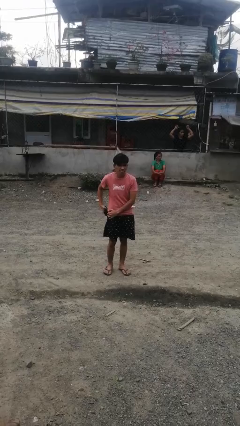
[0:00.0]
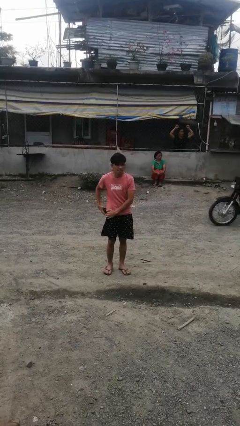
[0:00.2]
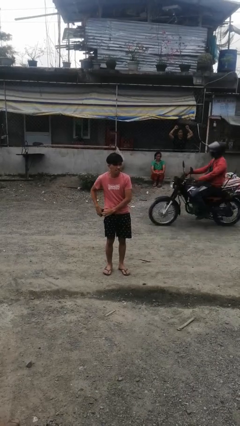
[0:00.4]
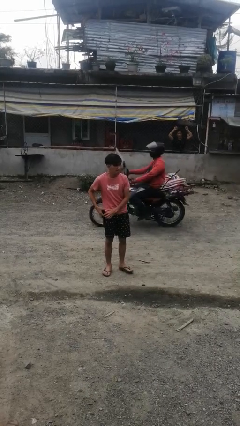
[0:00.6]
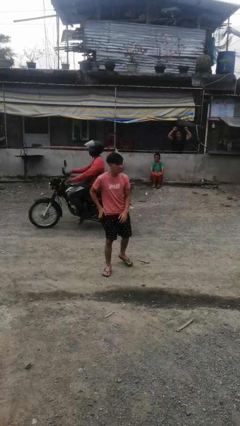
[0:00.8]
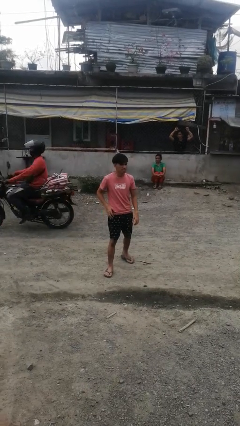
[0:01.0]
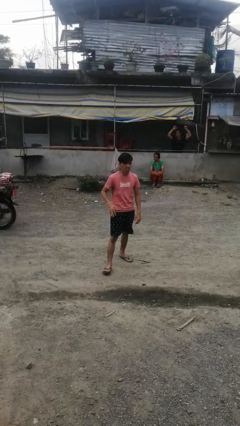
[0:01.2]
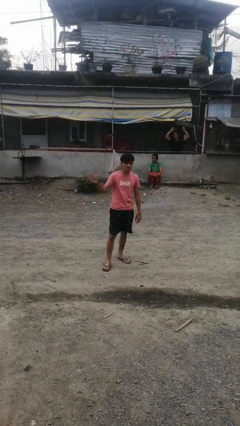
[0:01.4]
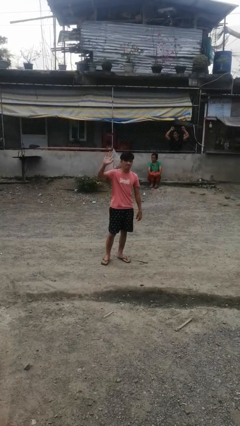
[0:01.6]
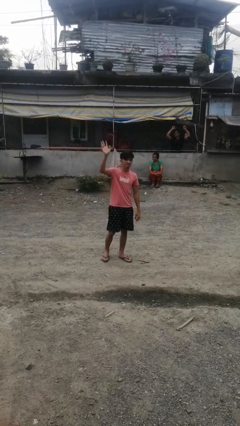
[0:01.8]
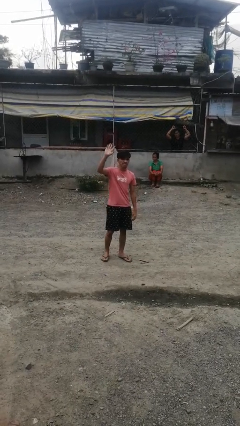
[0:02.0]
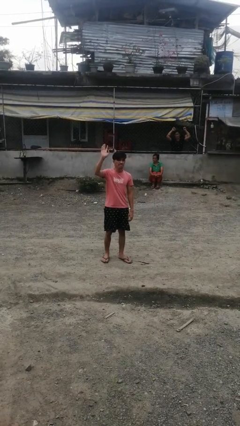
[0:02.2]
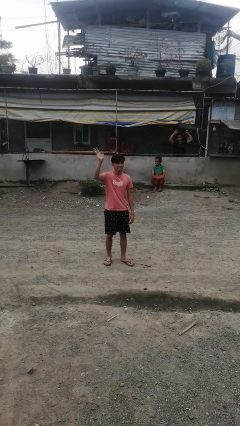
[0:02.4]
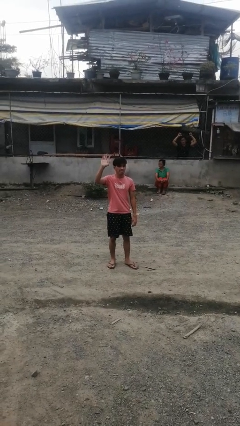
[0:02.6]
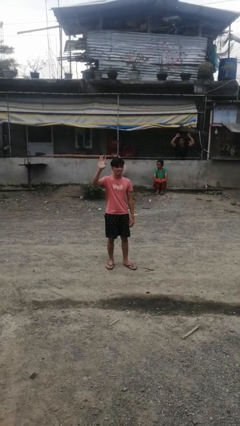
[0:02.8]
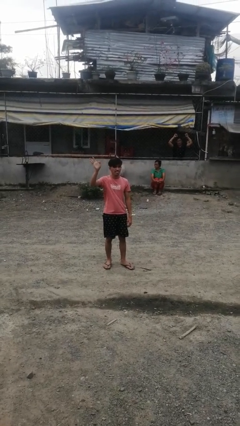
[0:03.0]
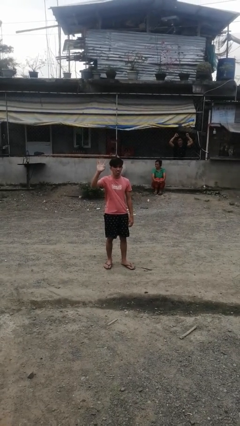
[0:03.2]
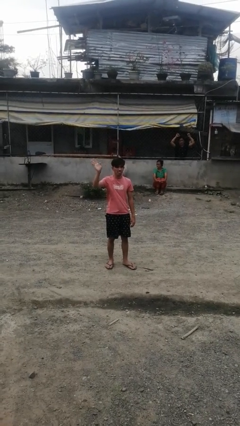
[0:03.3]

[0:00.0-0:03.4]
person waves at person

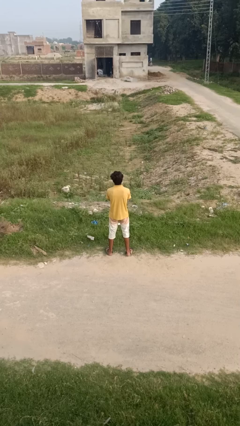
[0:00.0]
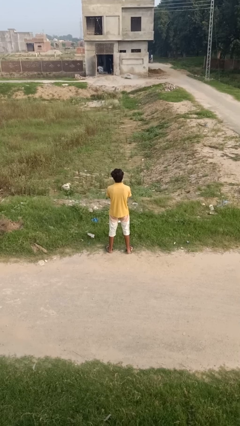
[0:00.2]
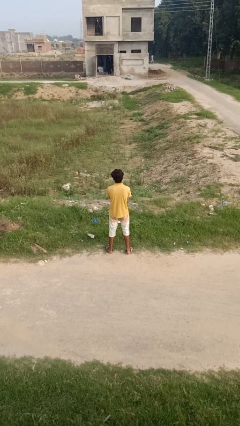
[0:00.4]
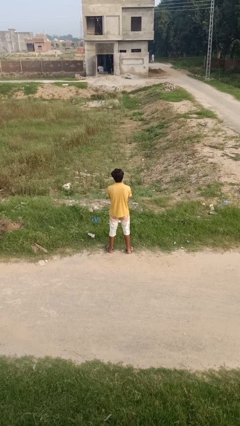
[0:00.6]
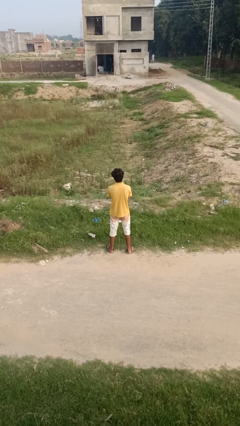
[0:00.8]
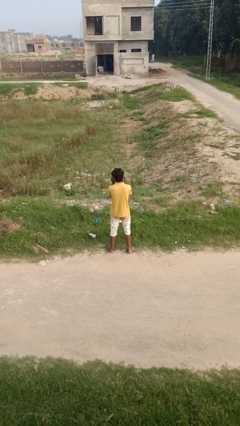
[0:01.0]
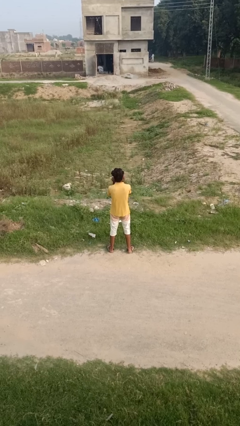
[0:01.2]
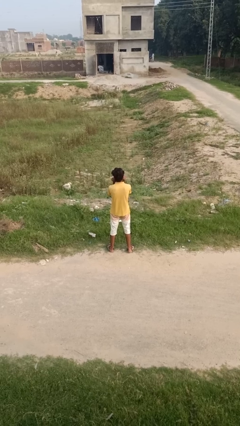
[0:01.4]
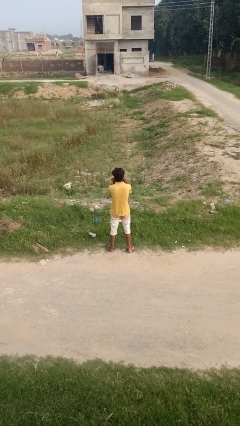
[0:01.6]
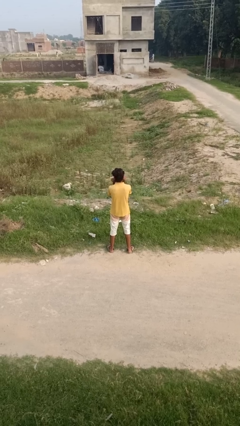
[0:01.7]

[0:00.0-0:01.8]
person touches earlobe

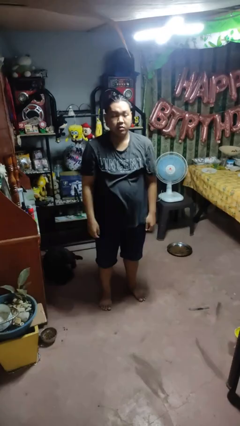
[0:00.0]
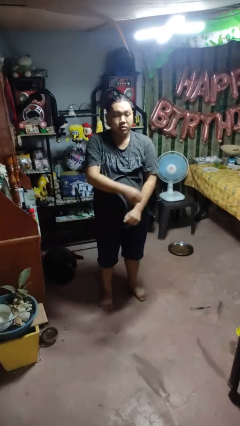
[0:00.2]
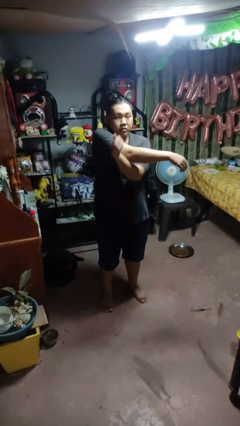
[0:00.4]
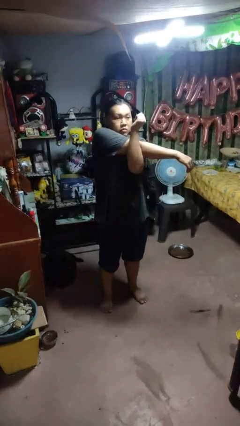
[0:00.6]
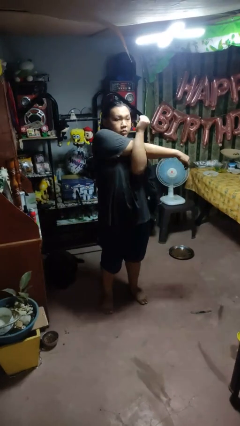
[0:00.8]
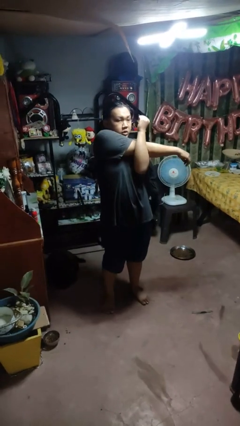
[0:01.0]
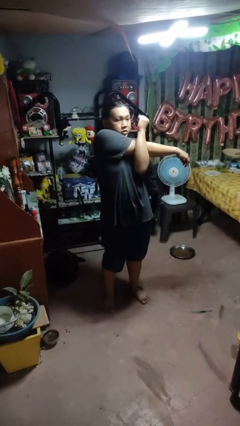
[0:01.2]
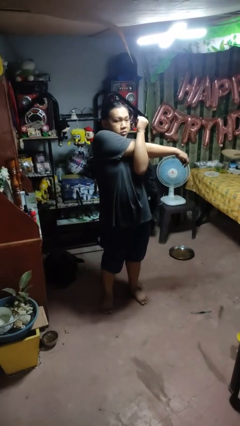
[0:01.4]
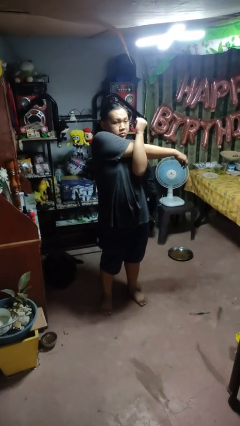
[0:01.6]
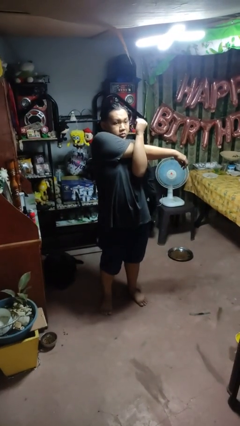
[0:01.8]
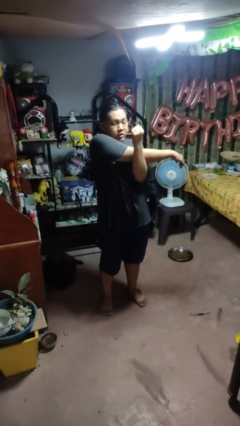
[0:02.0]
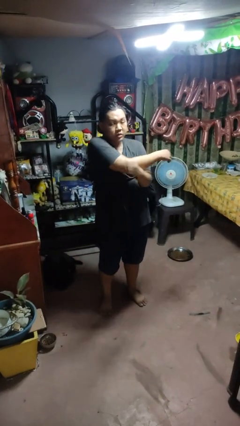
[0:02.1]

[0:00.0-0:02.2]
person crosses arms

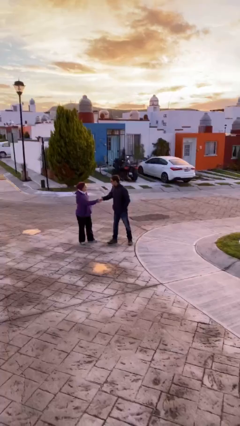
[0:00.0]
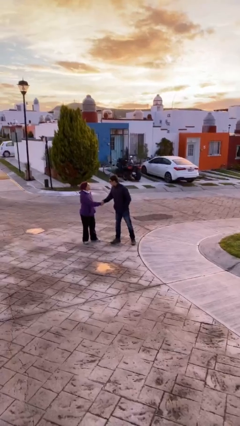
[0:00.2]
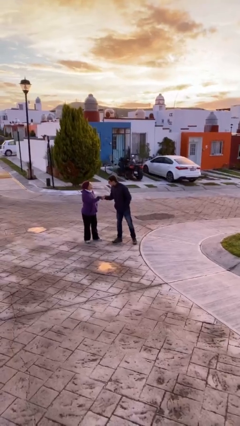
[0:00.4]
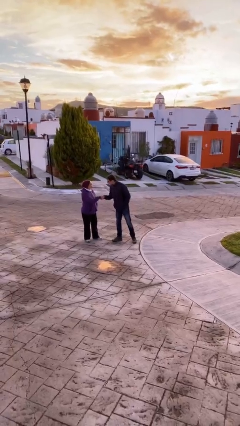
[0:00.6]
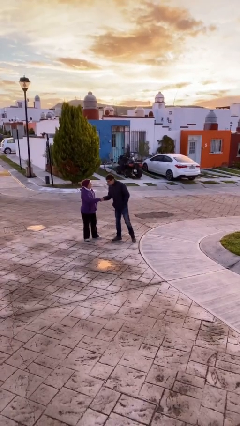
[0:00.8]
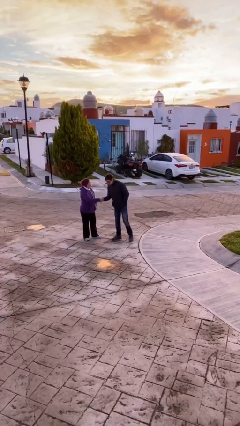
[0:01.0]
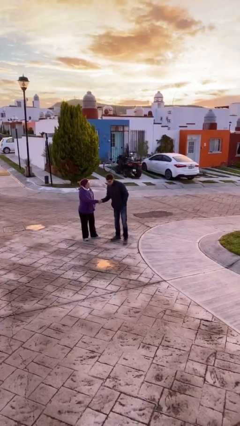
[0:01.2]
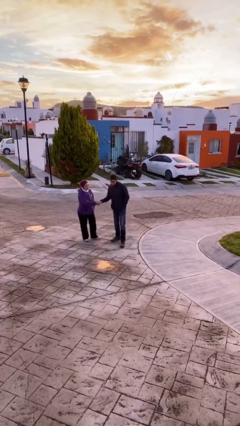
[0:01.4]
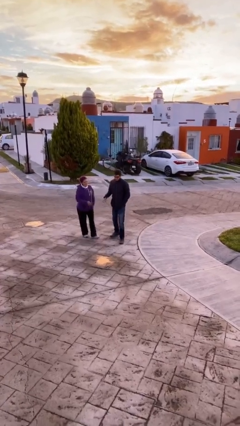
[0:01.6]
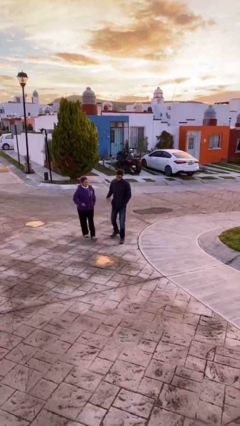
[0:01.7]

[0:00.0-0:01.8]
person shakes hand

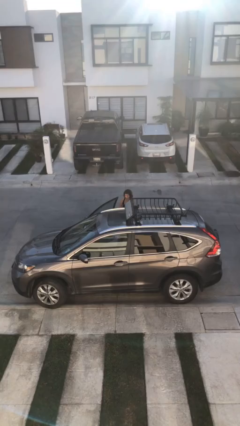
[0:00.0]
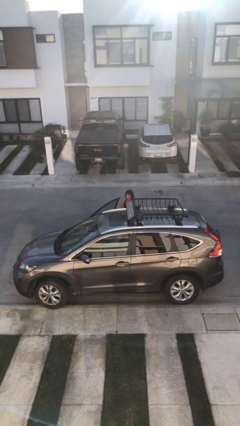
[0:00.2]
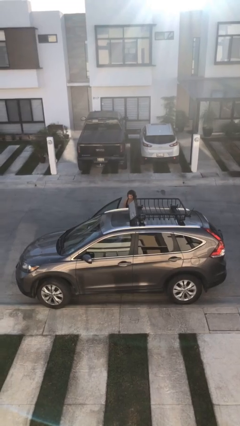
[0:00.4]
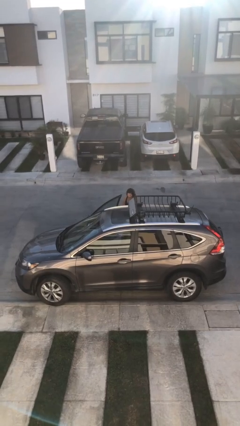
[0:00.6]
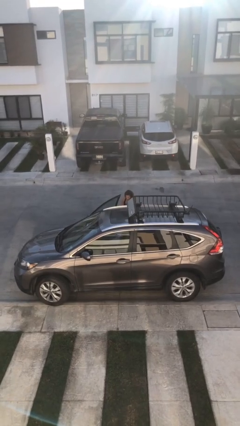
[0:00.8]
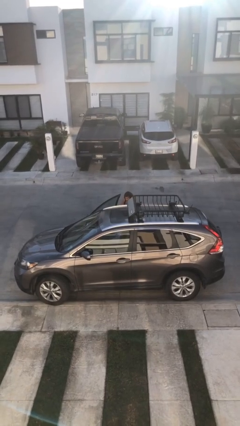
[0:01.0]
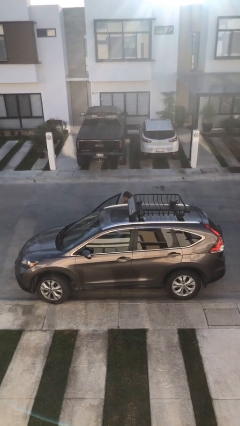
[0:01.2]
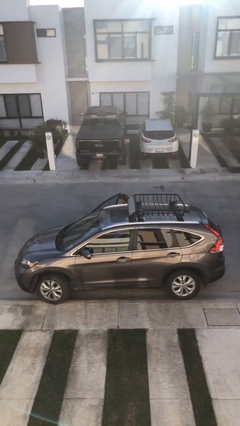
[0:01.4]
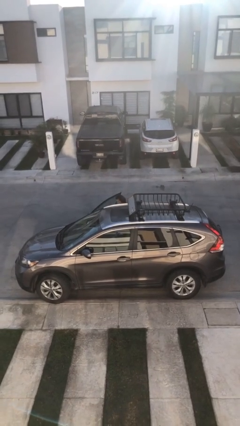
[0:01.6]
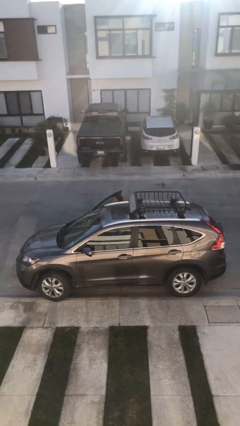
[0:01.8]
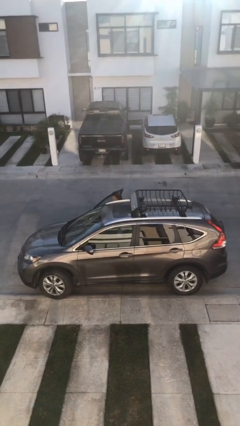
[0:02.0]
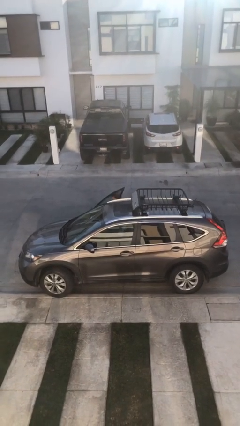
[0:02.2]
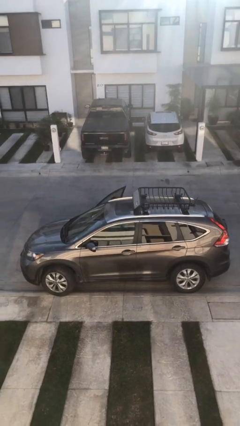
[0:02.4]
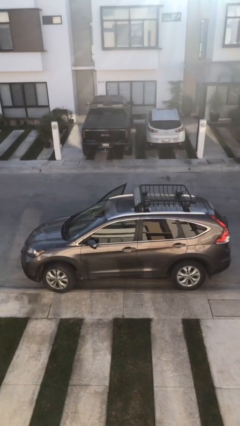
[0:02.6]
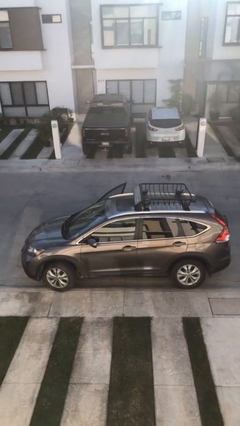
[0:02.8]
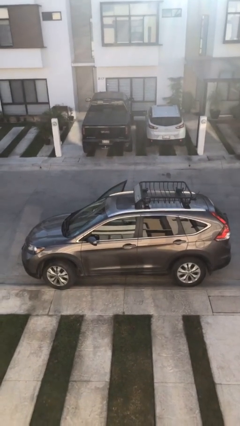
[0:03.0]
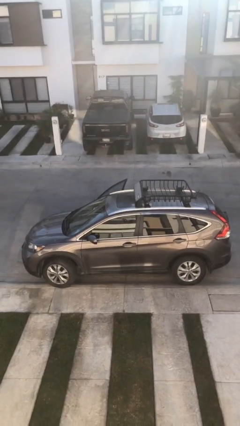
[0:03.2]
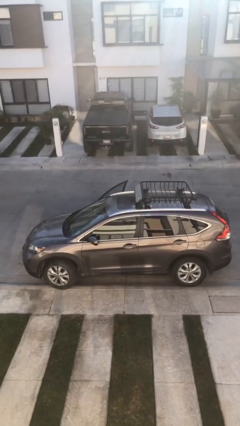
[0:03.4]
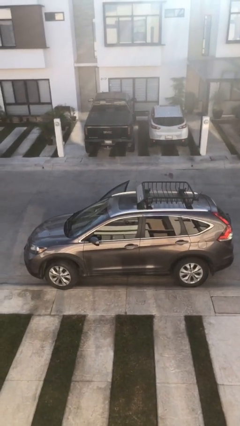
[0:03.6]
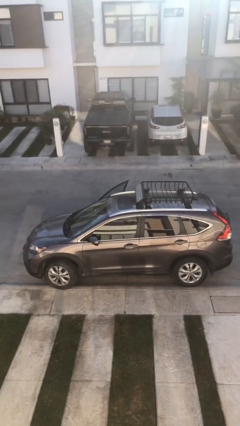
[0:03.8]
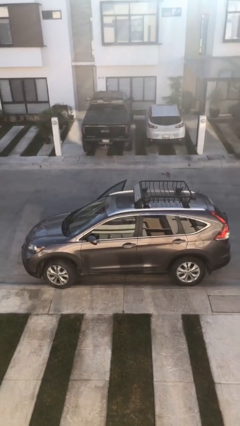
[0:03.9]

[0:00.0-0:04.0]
person enters car

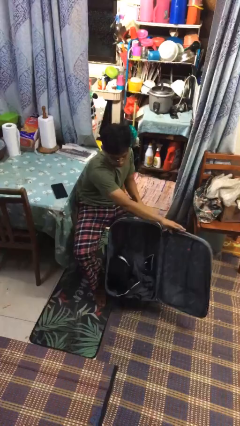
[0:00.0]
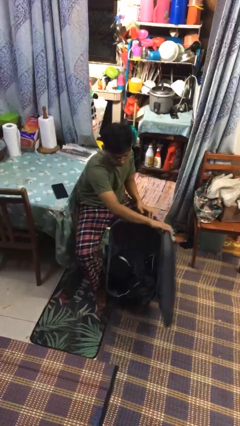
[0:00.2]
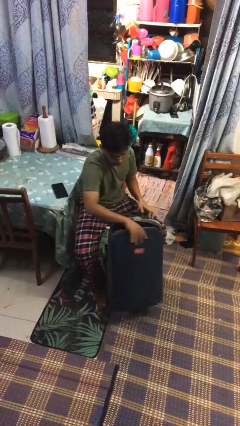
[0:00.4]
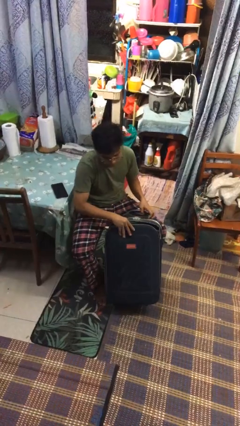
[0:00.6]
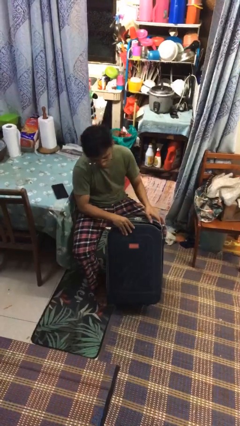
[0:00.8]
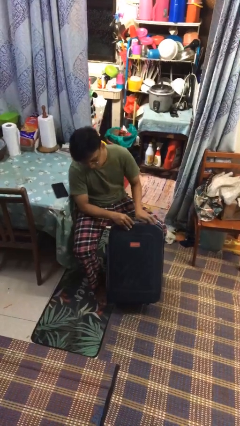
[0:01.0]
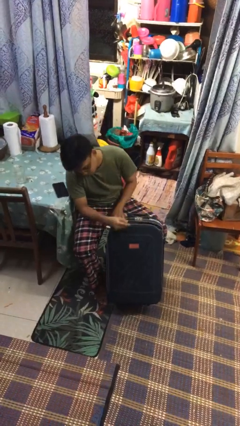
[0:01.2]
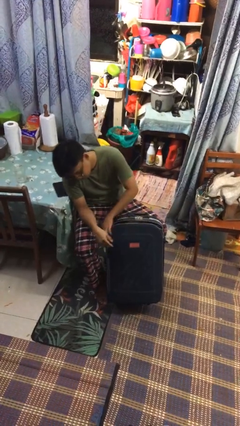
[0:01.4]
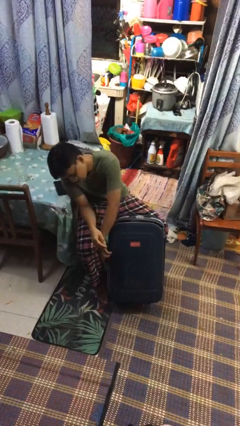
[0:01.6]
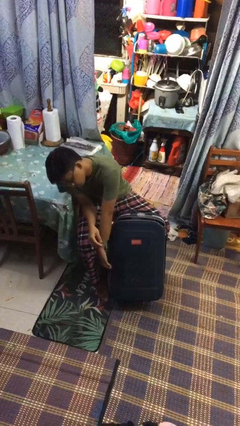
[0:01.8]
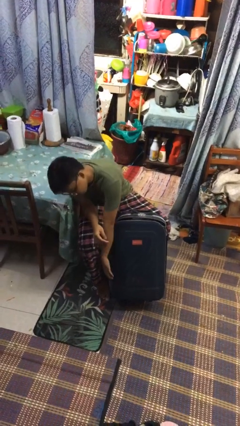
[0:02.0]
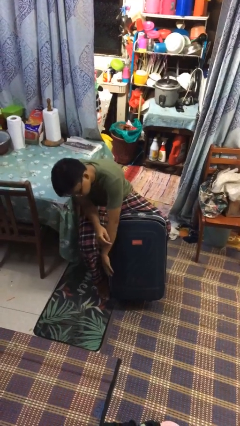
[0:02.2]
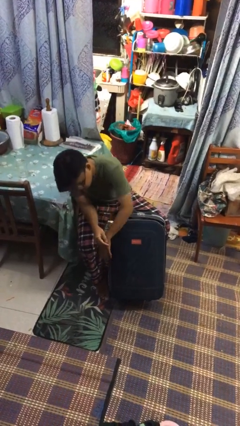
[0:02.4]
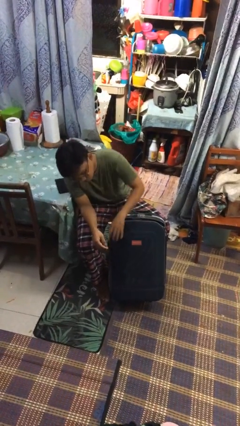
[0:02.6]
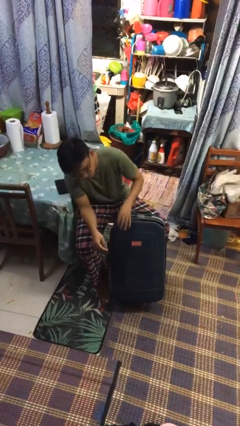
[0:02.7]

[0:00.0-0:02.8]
person closes suitcase

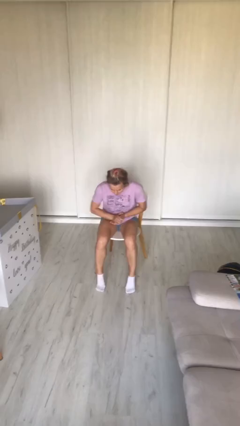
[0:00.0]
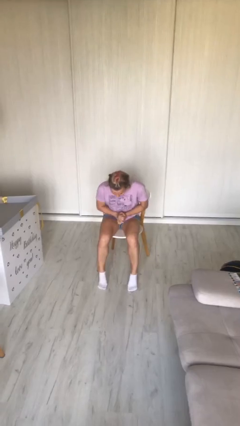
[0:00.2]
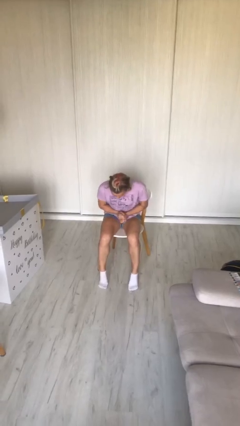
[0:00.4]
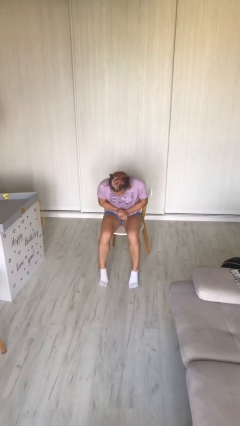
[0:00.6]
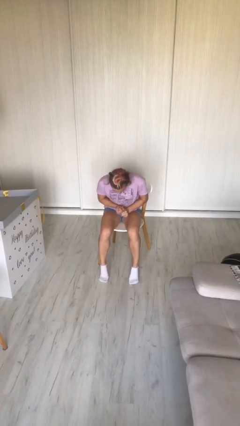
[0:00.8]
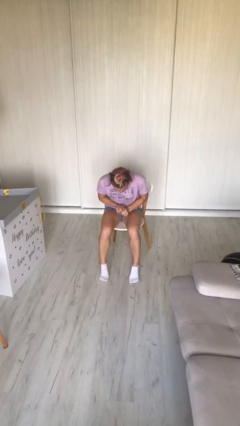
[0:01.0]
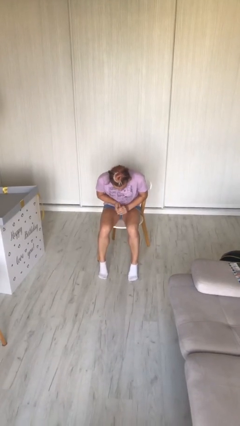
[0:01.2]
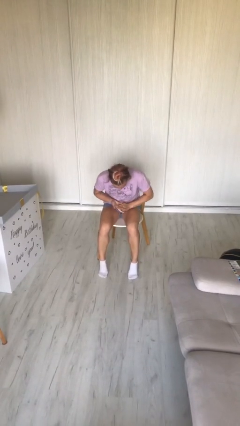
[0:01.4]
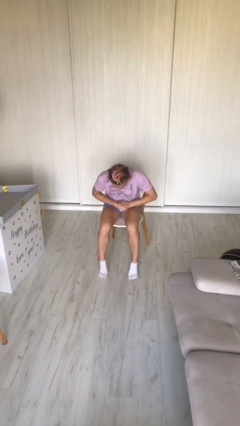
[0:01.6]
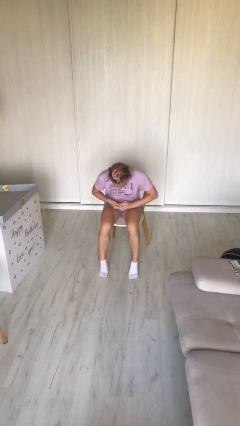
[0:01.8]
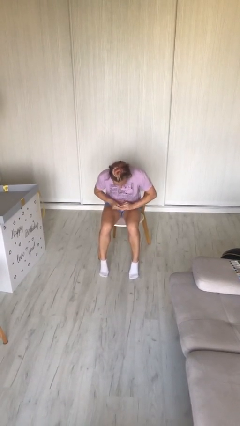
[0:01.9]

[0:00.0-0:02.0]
person looks at hands in lap
